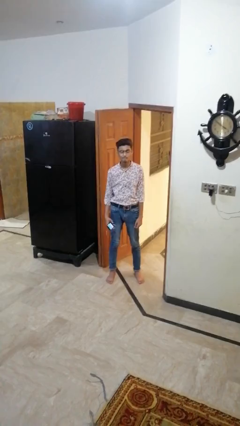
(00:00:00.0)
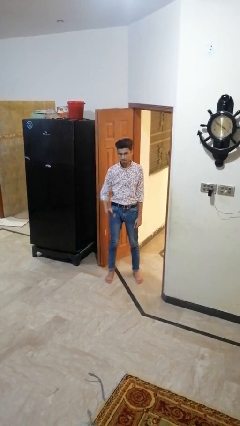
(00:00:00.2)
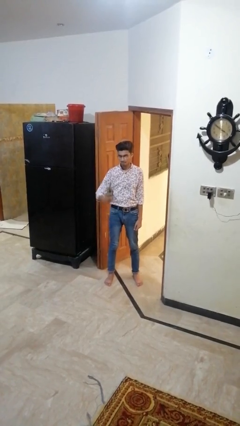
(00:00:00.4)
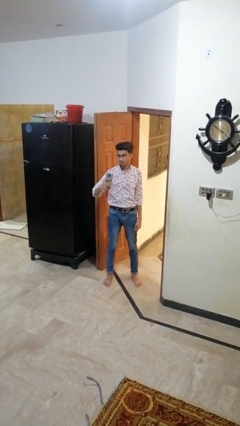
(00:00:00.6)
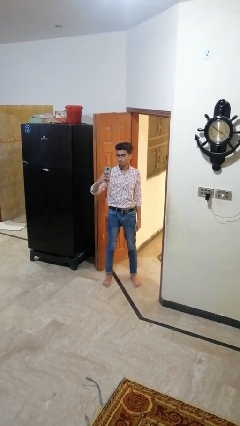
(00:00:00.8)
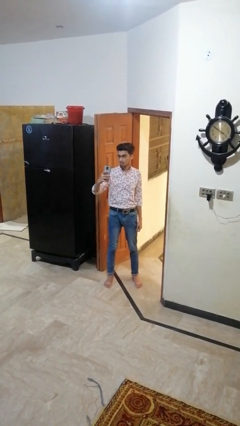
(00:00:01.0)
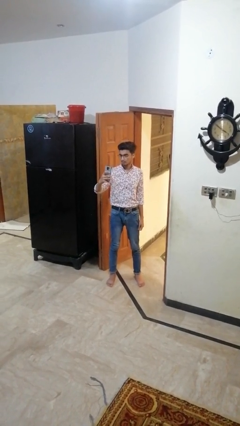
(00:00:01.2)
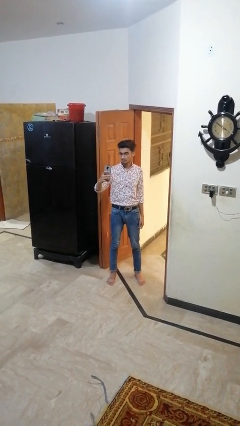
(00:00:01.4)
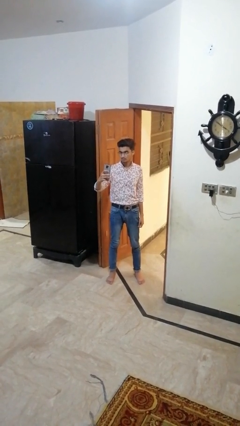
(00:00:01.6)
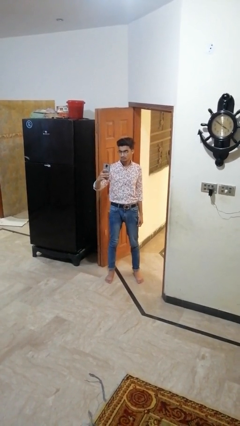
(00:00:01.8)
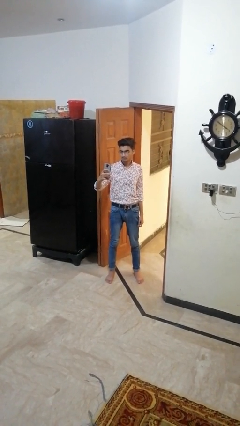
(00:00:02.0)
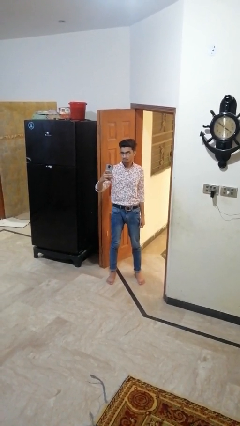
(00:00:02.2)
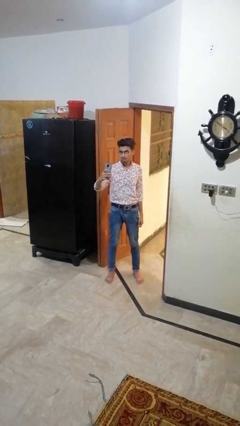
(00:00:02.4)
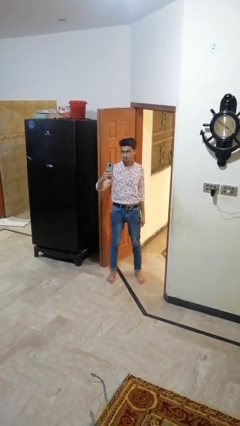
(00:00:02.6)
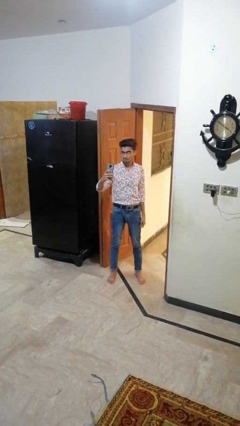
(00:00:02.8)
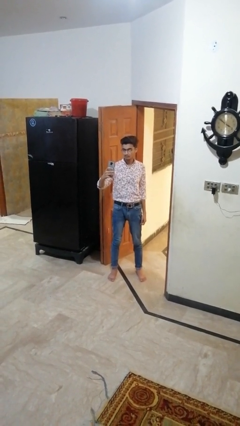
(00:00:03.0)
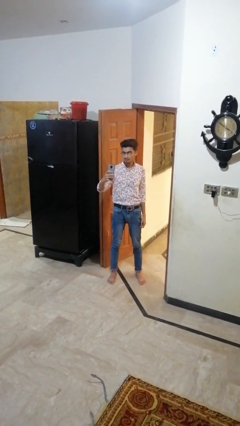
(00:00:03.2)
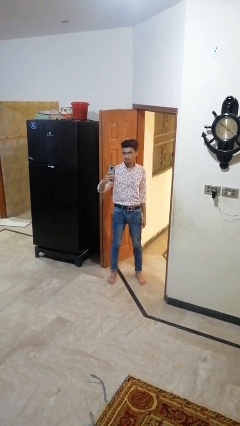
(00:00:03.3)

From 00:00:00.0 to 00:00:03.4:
person takes selfie

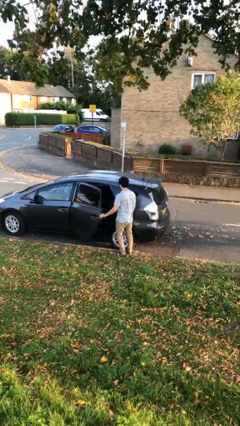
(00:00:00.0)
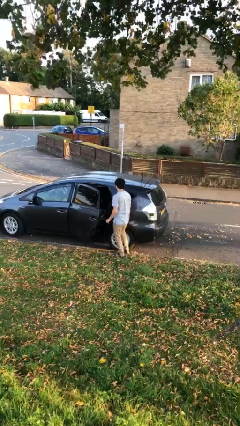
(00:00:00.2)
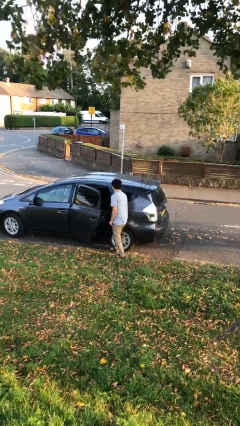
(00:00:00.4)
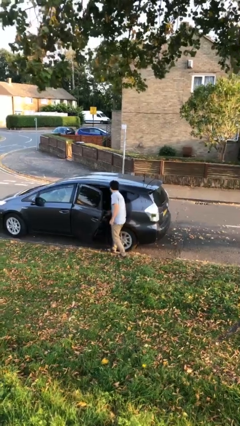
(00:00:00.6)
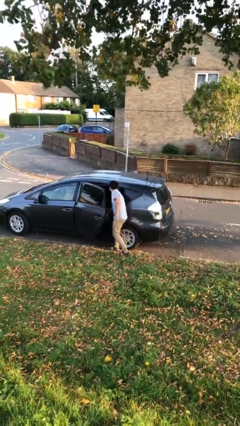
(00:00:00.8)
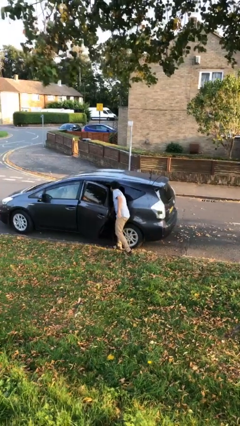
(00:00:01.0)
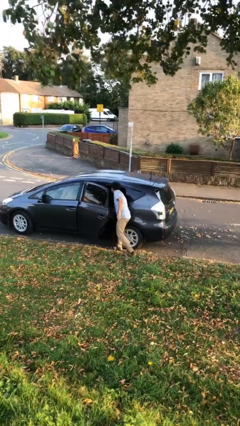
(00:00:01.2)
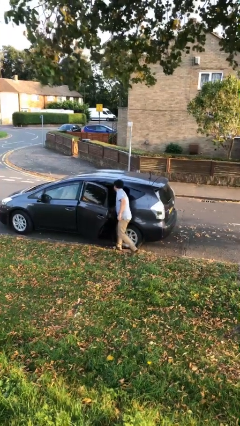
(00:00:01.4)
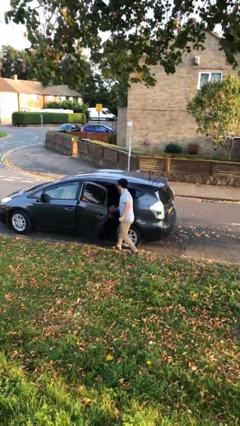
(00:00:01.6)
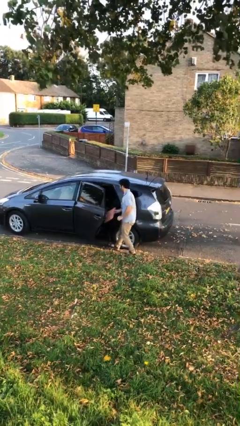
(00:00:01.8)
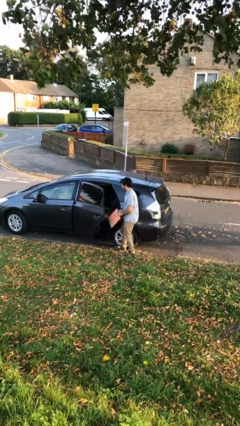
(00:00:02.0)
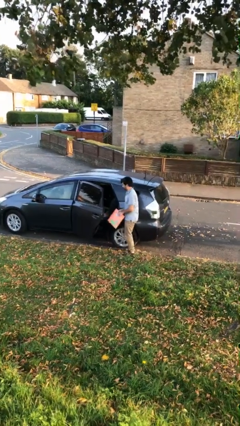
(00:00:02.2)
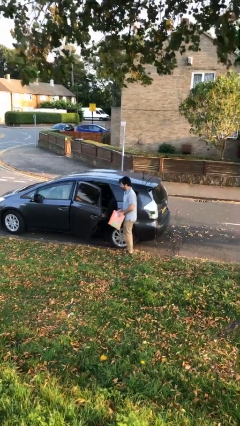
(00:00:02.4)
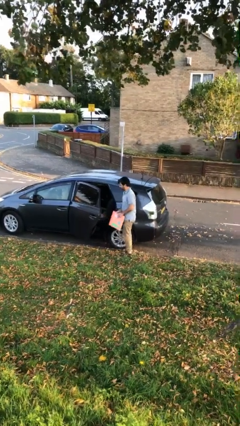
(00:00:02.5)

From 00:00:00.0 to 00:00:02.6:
person unloads car

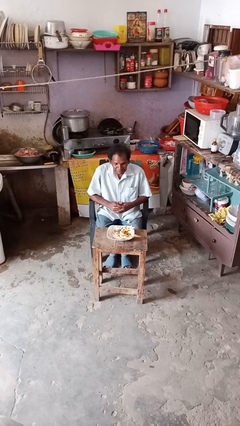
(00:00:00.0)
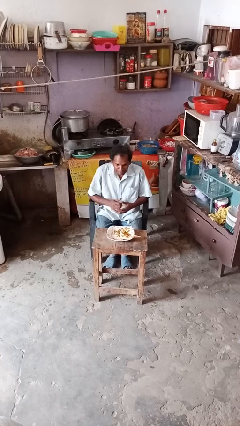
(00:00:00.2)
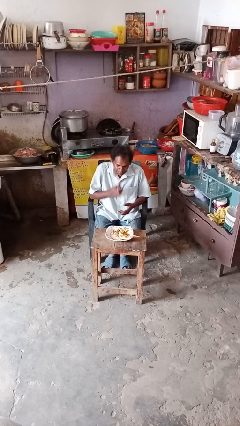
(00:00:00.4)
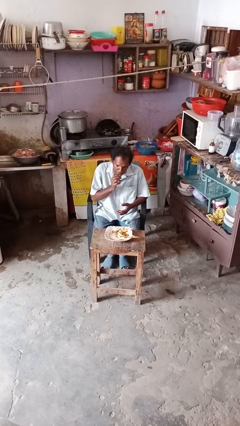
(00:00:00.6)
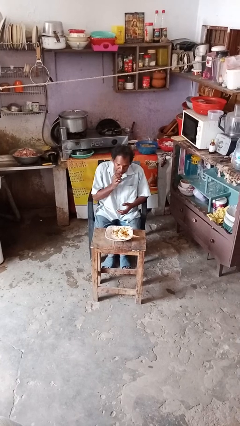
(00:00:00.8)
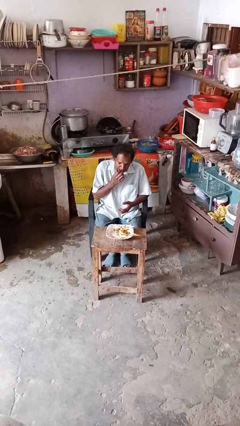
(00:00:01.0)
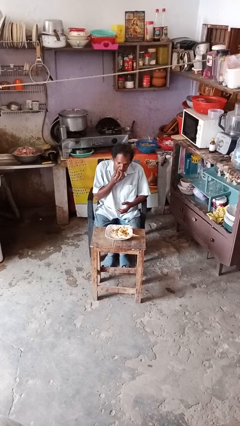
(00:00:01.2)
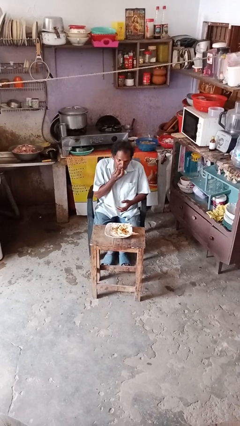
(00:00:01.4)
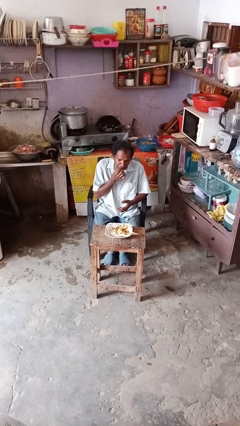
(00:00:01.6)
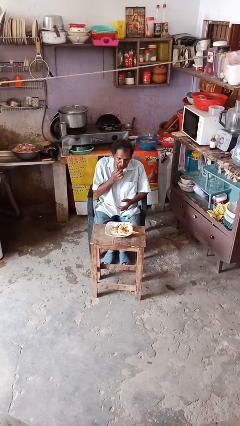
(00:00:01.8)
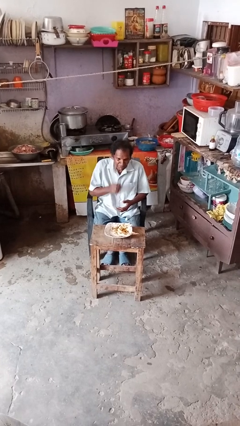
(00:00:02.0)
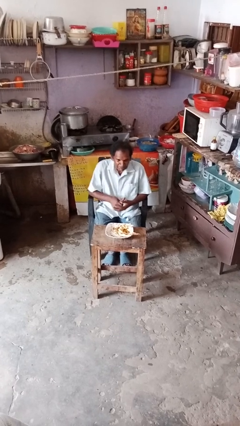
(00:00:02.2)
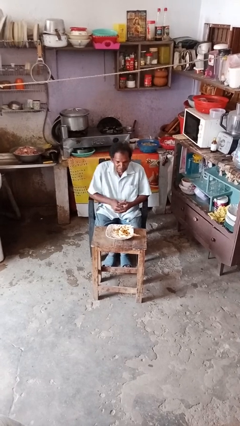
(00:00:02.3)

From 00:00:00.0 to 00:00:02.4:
person licks fingers

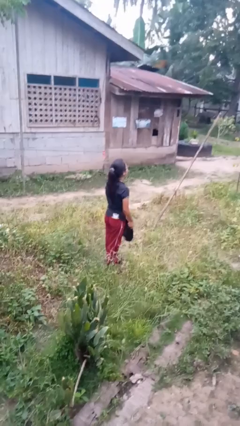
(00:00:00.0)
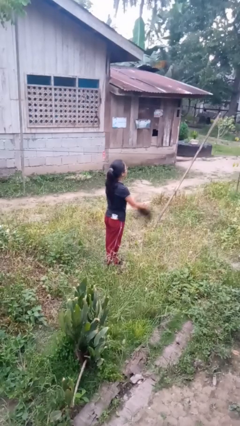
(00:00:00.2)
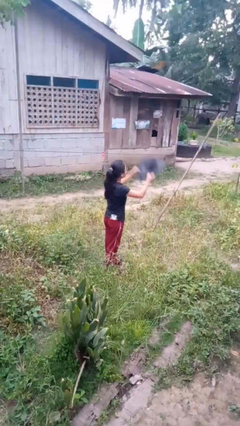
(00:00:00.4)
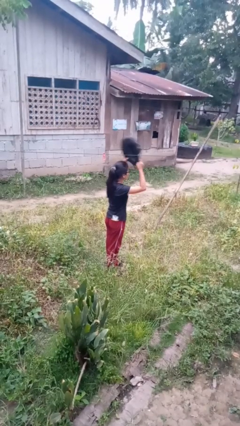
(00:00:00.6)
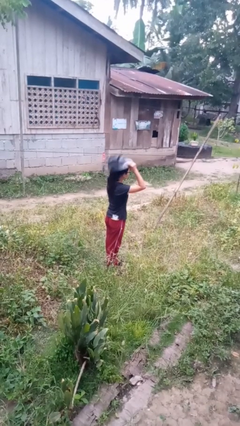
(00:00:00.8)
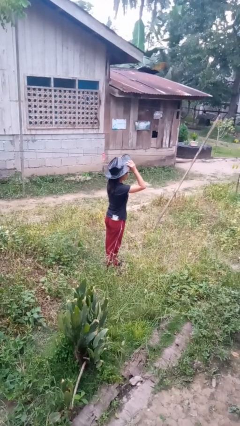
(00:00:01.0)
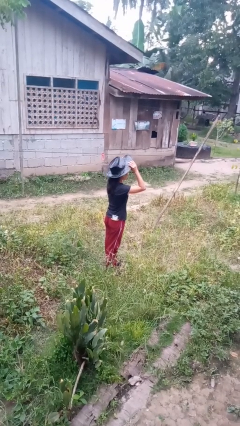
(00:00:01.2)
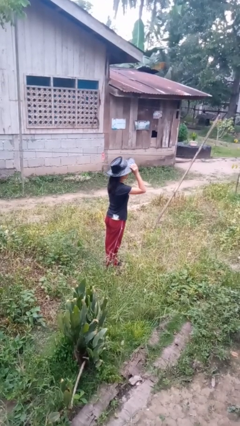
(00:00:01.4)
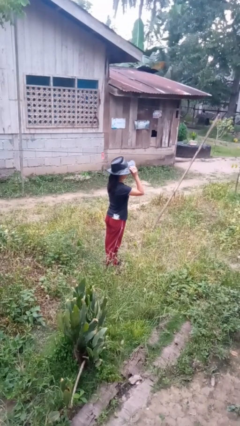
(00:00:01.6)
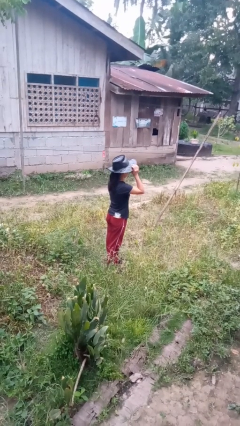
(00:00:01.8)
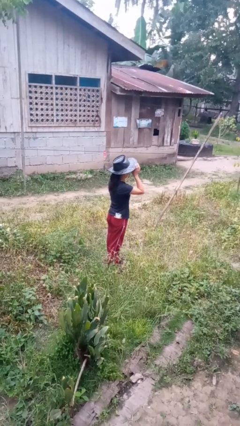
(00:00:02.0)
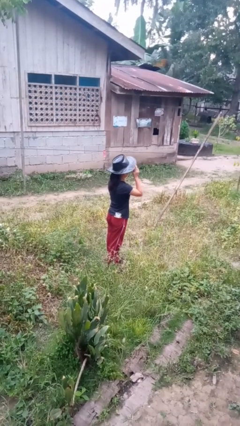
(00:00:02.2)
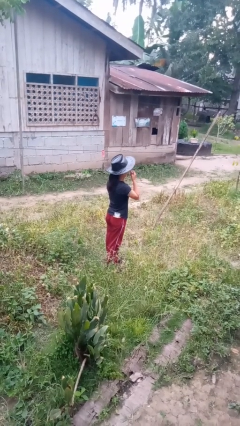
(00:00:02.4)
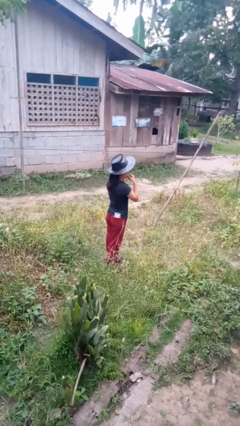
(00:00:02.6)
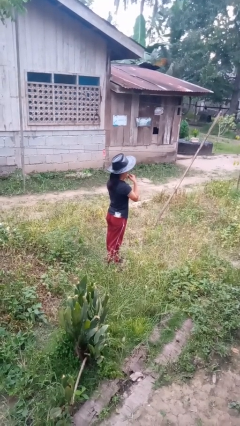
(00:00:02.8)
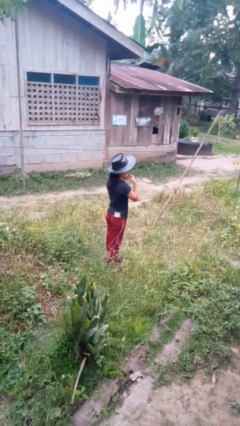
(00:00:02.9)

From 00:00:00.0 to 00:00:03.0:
person puts on hat

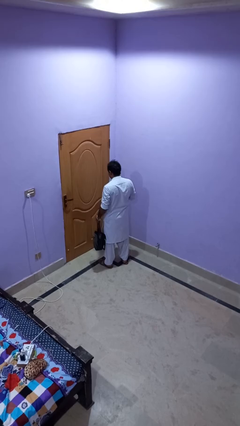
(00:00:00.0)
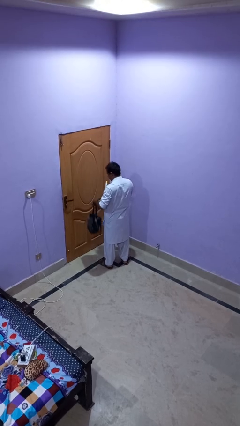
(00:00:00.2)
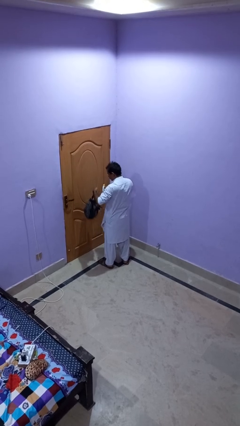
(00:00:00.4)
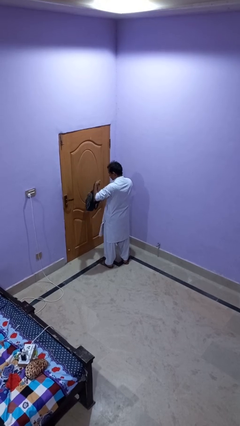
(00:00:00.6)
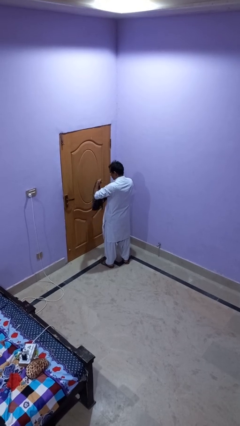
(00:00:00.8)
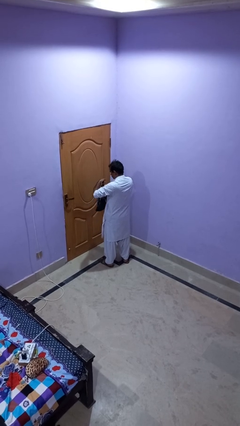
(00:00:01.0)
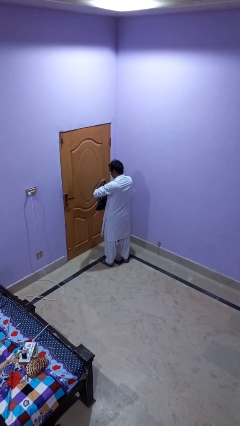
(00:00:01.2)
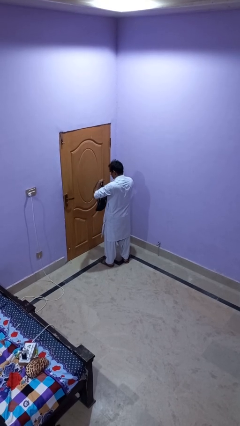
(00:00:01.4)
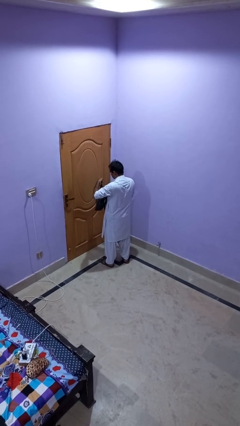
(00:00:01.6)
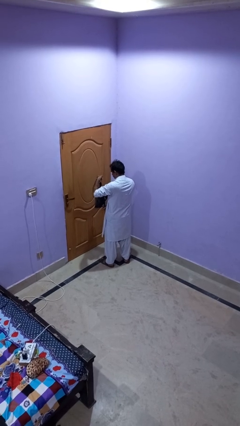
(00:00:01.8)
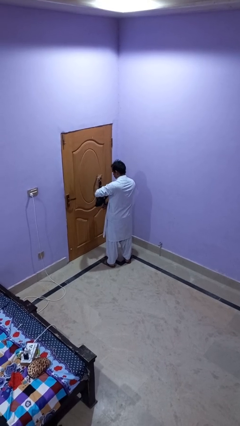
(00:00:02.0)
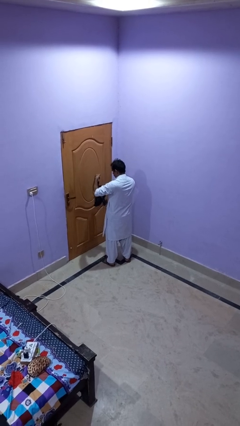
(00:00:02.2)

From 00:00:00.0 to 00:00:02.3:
person puts object into purse

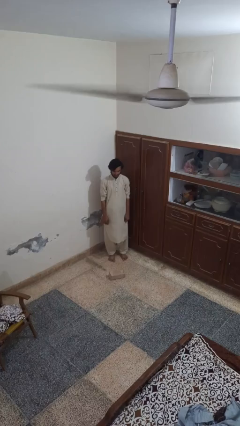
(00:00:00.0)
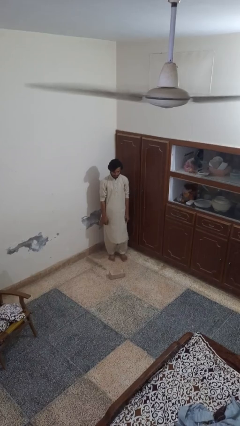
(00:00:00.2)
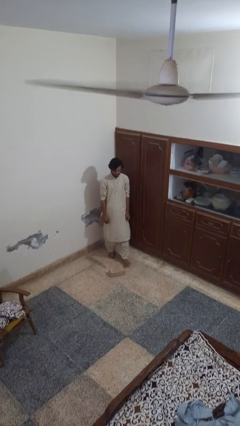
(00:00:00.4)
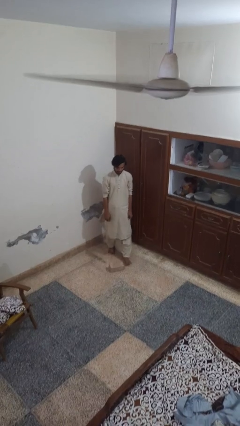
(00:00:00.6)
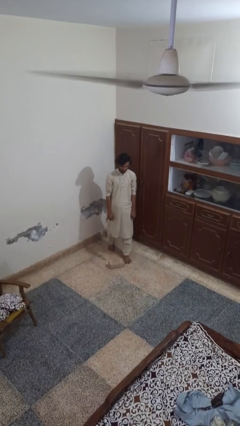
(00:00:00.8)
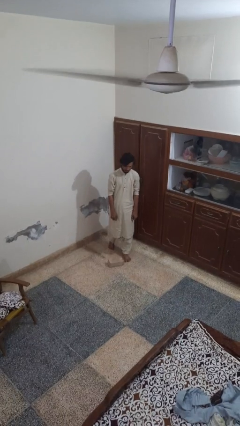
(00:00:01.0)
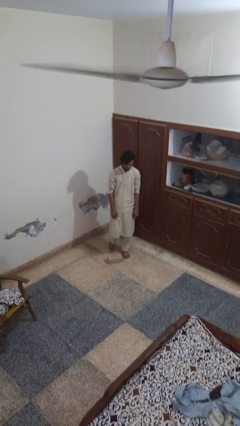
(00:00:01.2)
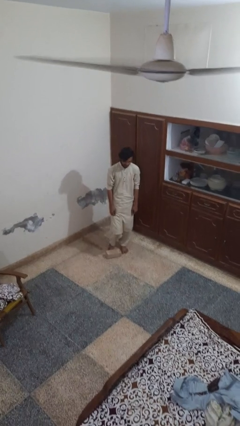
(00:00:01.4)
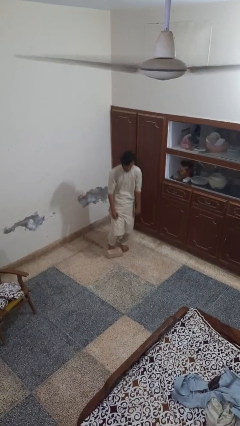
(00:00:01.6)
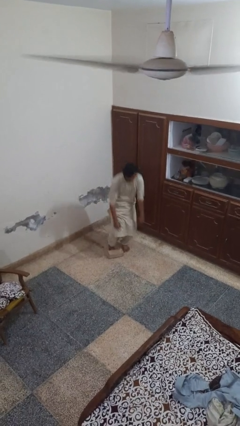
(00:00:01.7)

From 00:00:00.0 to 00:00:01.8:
person trips on object on floor

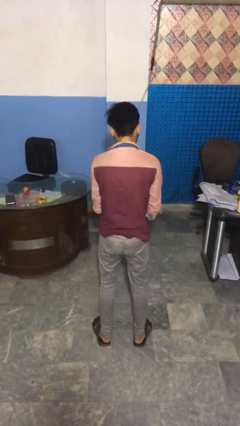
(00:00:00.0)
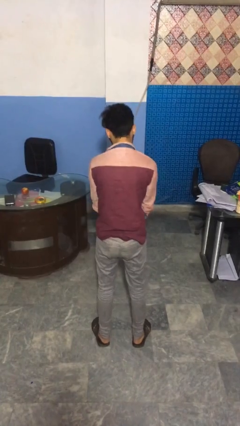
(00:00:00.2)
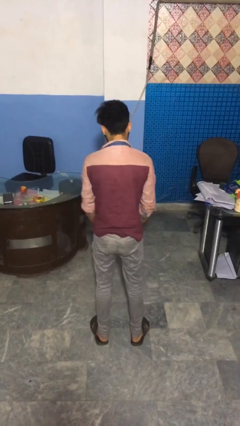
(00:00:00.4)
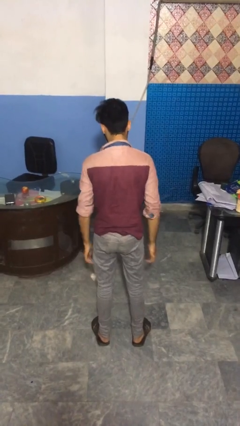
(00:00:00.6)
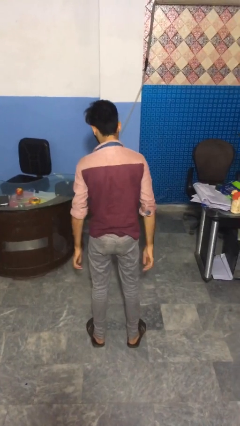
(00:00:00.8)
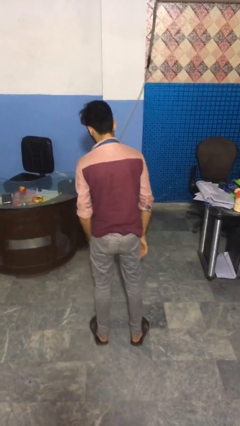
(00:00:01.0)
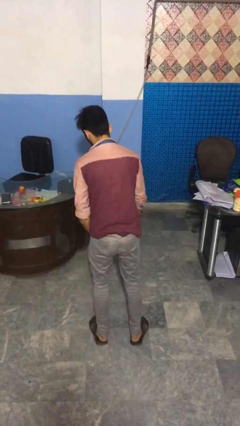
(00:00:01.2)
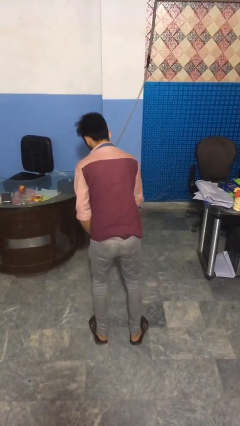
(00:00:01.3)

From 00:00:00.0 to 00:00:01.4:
person catches dropped object
